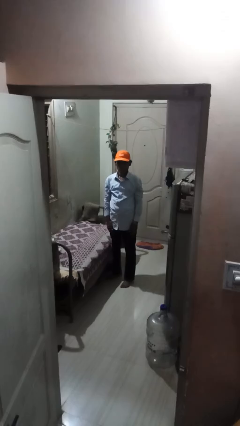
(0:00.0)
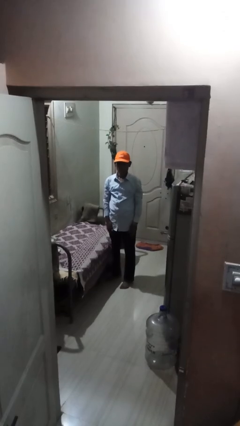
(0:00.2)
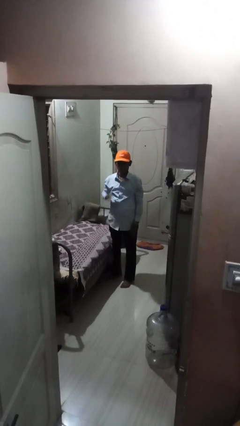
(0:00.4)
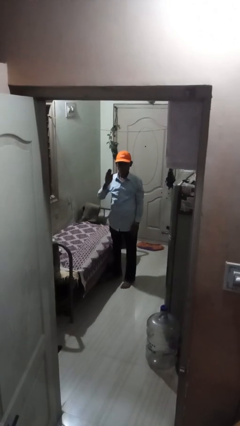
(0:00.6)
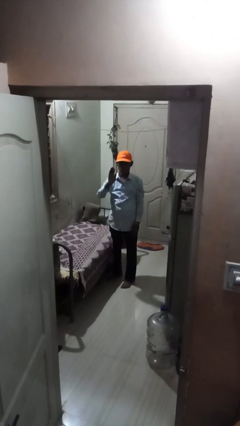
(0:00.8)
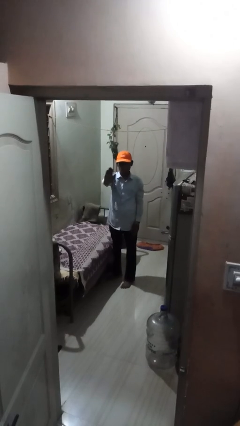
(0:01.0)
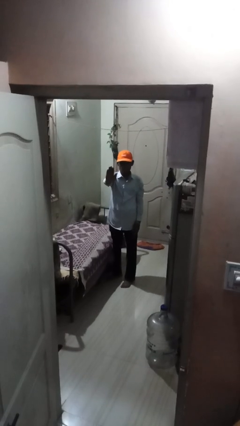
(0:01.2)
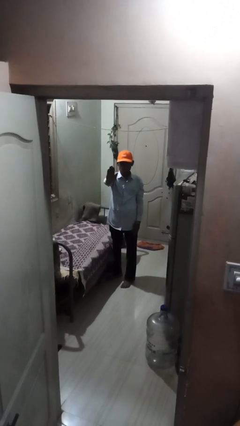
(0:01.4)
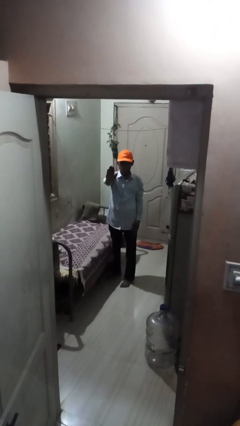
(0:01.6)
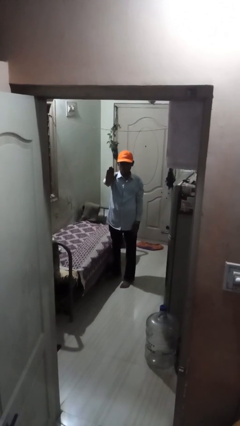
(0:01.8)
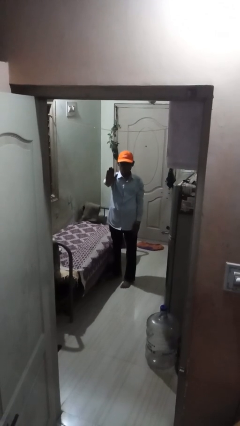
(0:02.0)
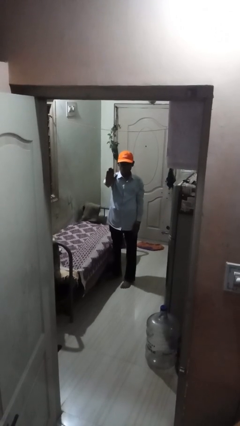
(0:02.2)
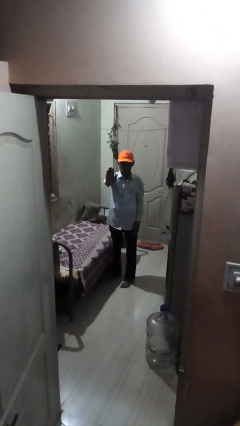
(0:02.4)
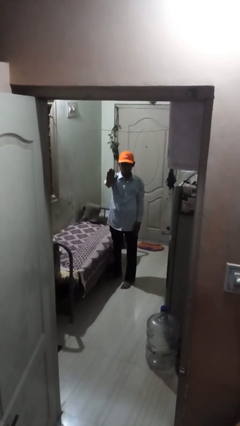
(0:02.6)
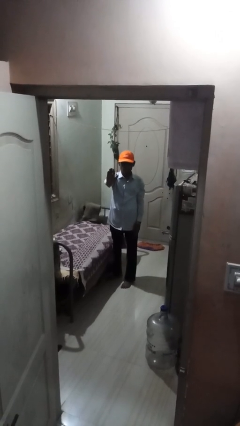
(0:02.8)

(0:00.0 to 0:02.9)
person gestures stop

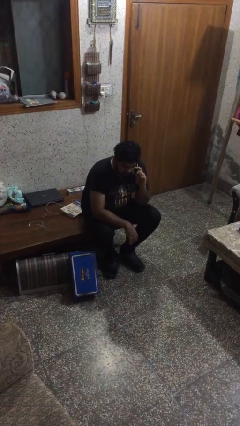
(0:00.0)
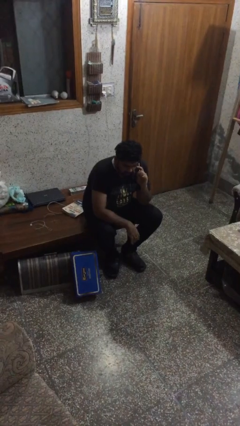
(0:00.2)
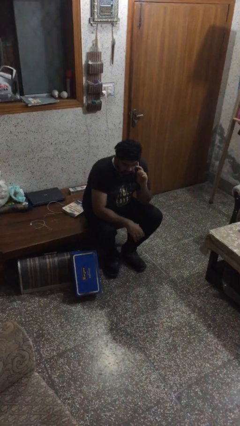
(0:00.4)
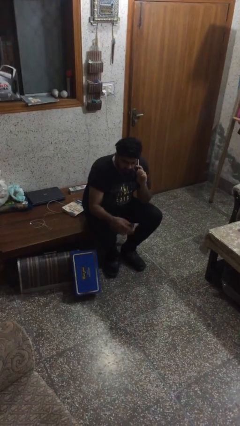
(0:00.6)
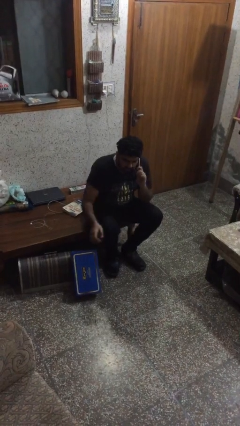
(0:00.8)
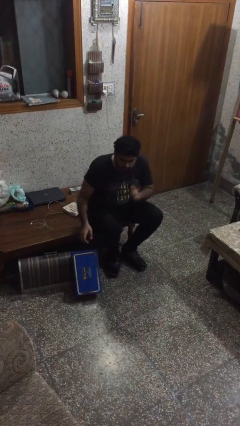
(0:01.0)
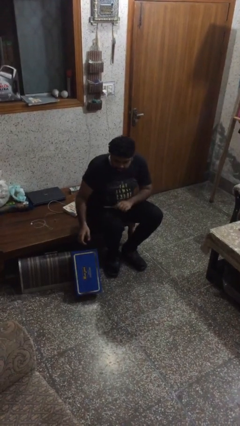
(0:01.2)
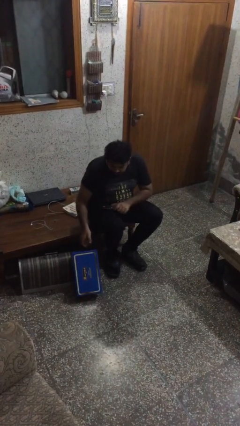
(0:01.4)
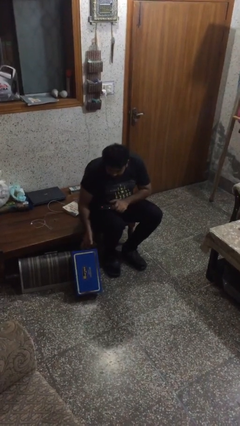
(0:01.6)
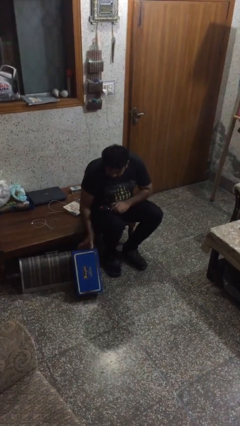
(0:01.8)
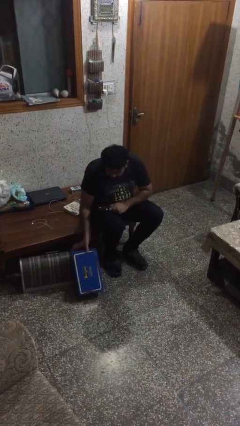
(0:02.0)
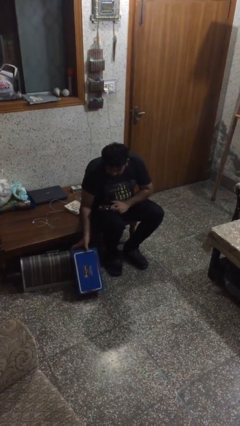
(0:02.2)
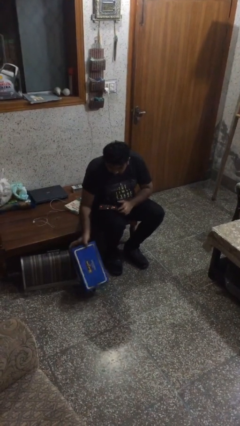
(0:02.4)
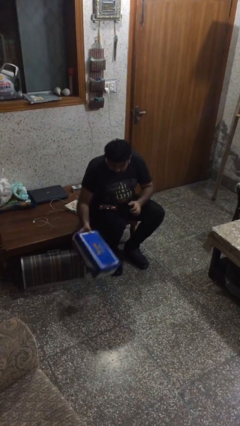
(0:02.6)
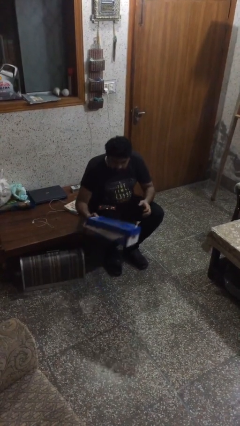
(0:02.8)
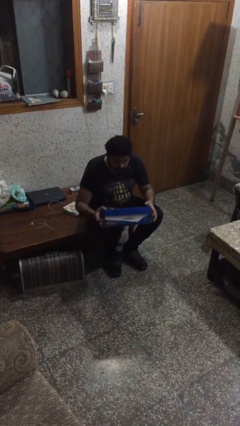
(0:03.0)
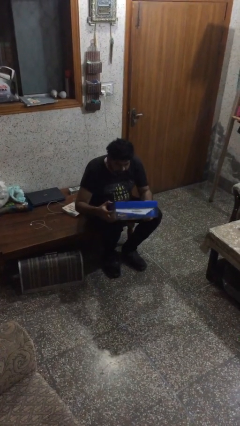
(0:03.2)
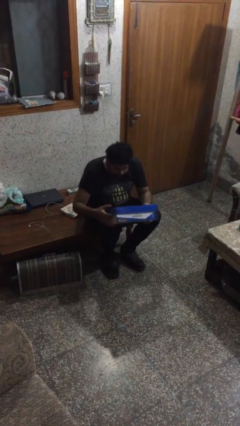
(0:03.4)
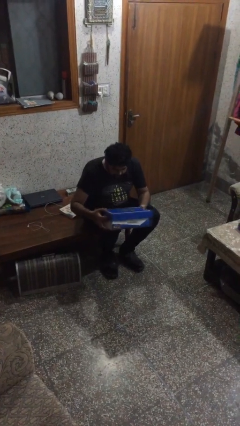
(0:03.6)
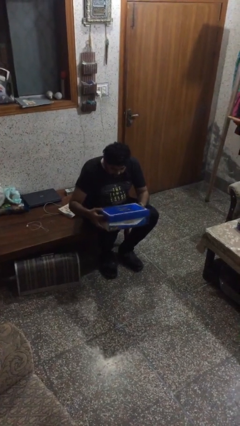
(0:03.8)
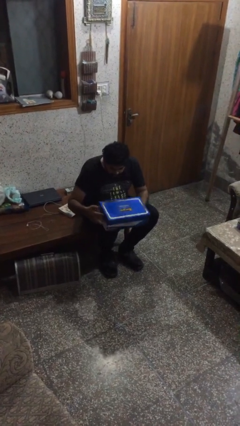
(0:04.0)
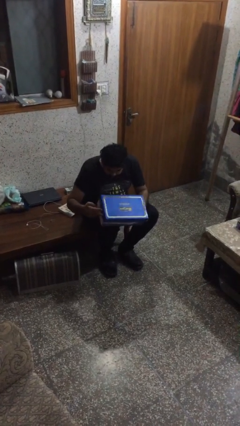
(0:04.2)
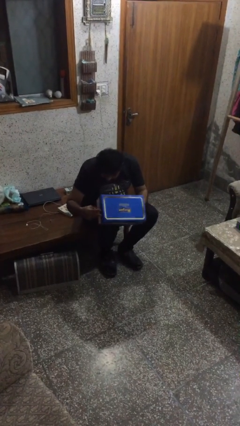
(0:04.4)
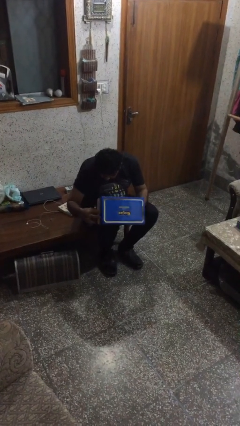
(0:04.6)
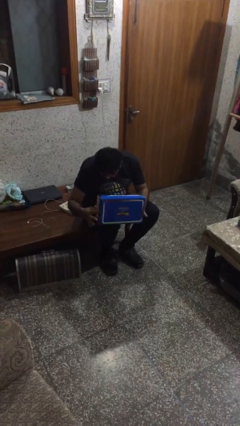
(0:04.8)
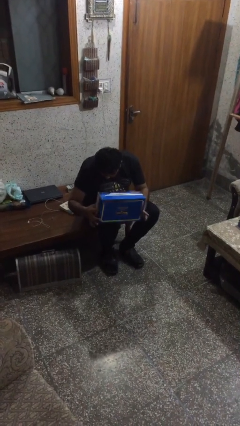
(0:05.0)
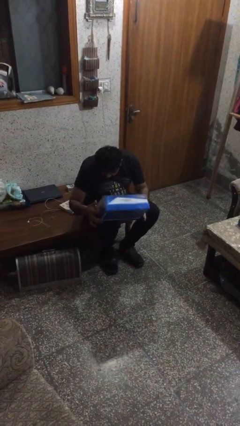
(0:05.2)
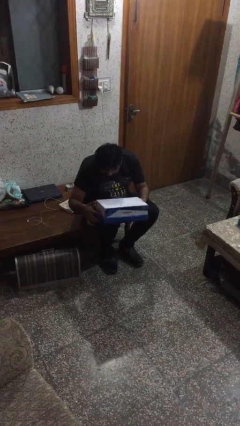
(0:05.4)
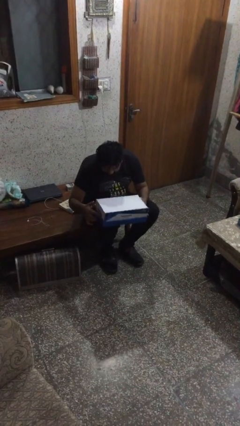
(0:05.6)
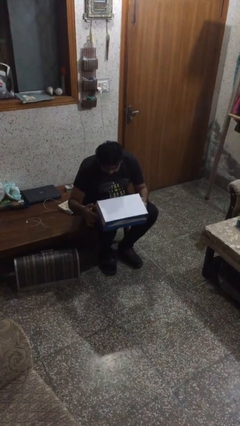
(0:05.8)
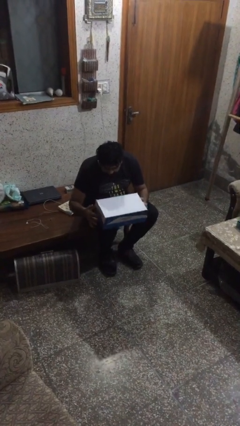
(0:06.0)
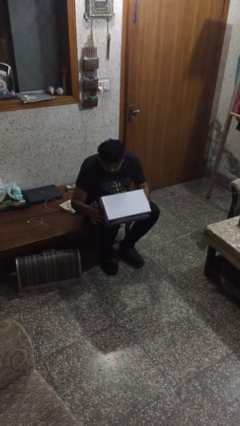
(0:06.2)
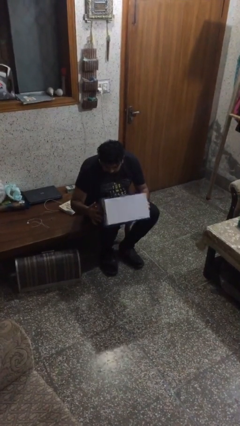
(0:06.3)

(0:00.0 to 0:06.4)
person picks up object from floor

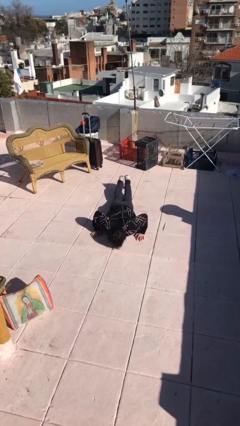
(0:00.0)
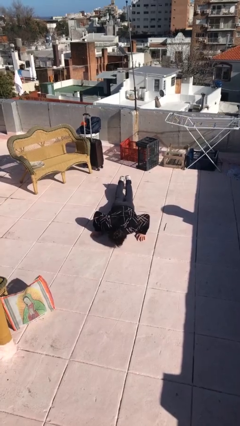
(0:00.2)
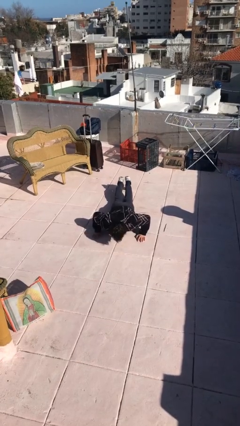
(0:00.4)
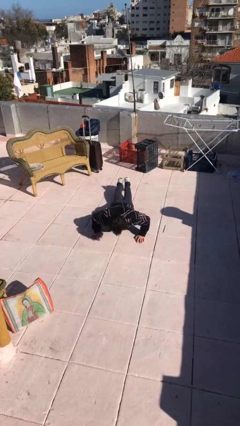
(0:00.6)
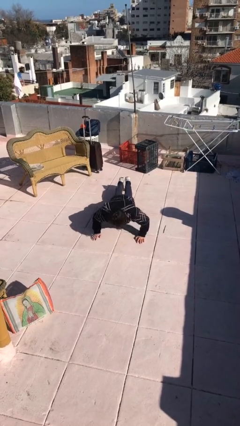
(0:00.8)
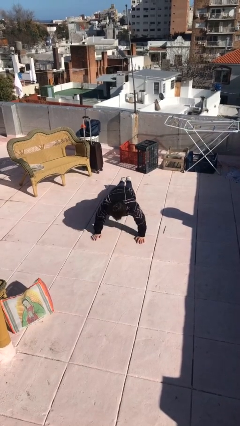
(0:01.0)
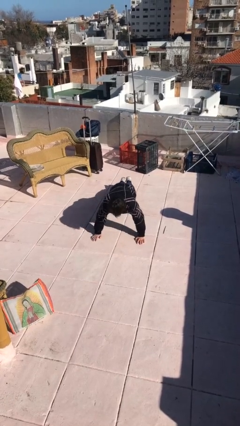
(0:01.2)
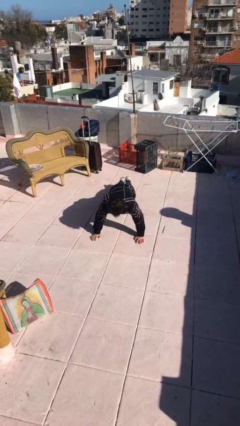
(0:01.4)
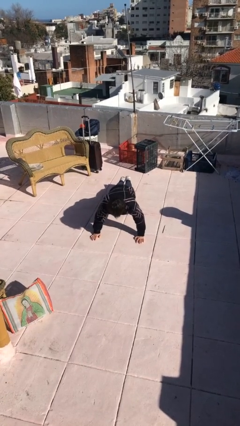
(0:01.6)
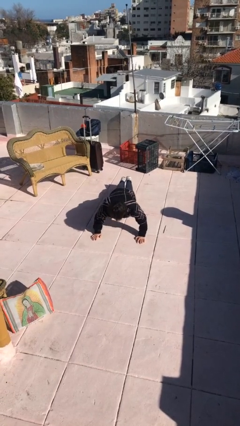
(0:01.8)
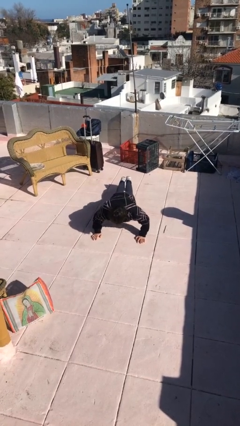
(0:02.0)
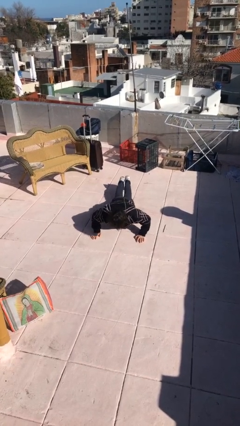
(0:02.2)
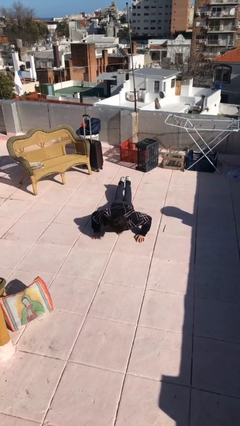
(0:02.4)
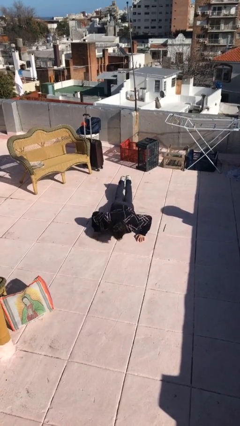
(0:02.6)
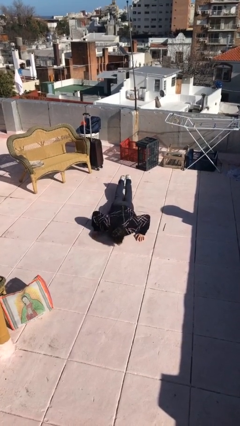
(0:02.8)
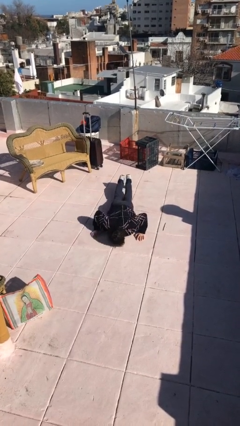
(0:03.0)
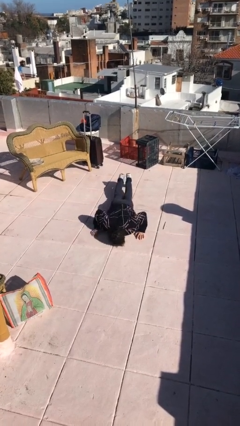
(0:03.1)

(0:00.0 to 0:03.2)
person exercises with pushup

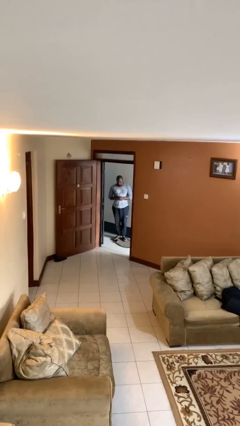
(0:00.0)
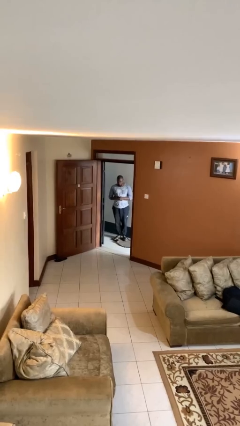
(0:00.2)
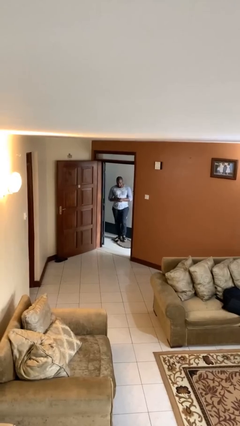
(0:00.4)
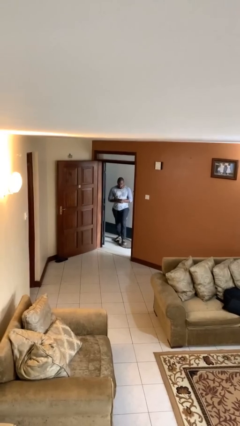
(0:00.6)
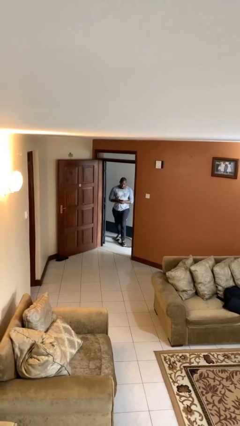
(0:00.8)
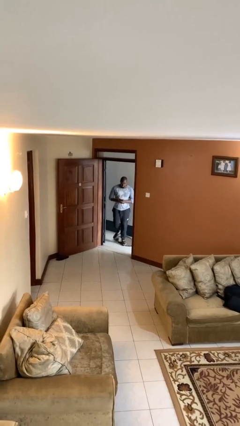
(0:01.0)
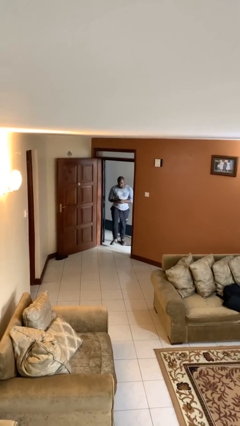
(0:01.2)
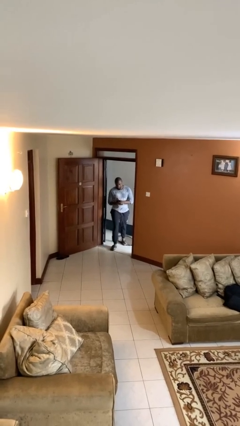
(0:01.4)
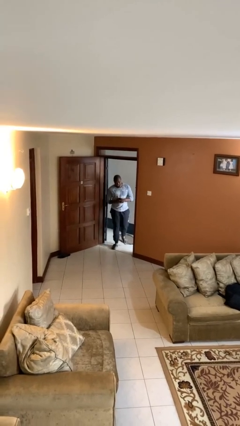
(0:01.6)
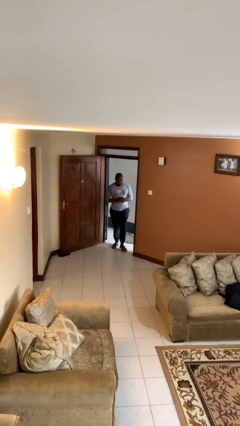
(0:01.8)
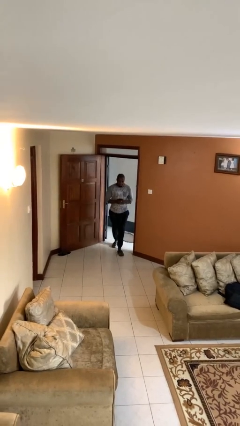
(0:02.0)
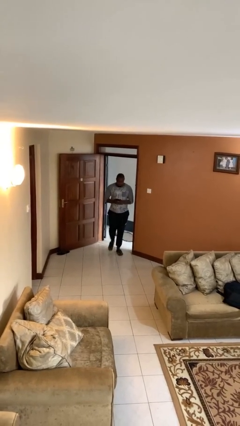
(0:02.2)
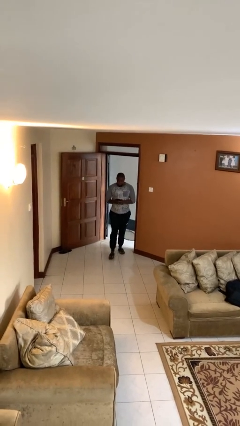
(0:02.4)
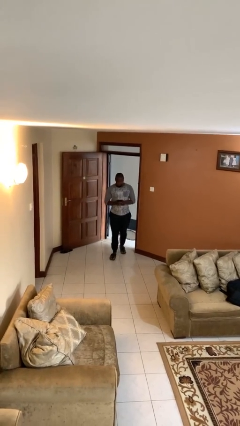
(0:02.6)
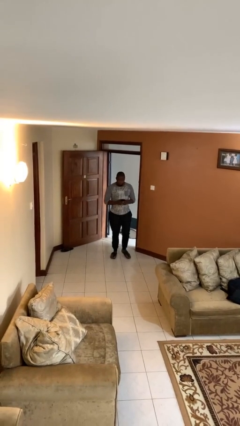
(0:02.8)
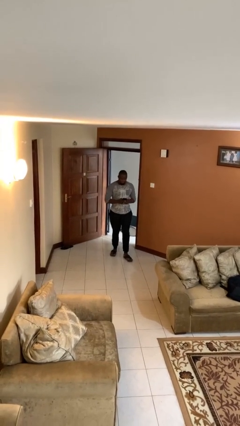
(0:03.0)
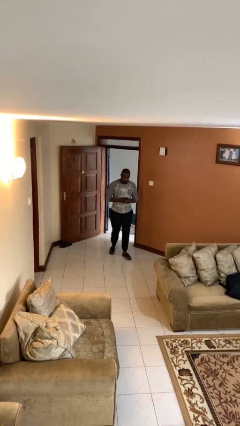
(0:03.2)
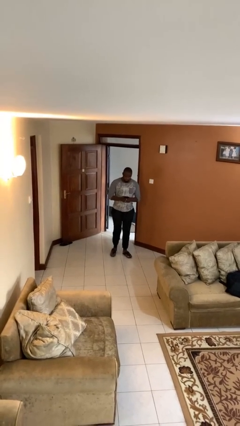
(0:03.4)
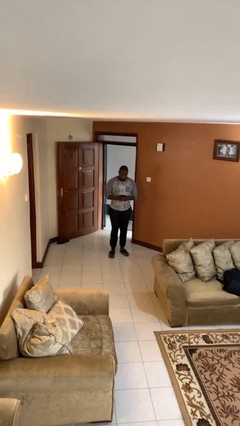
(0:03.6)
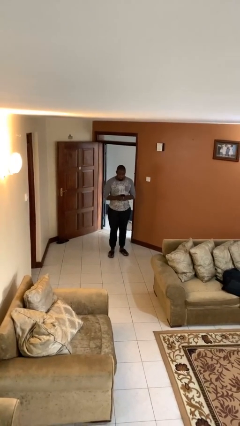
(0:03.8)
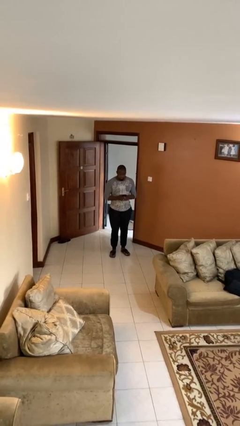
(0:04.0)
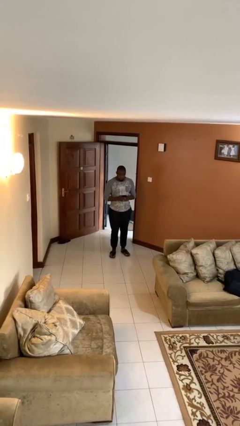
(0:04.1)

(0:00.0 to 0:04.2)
person enters scene through structure

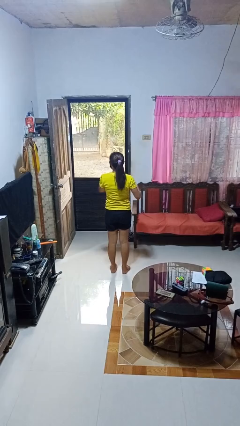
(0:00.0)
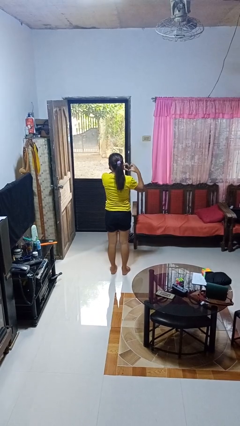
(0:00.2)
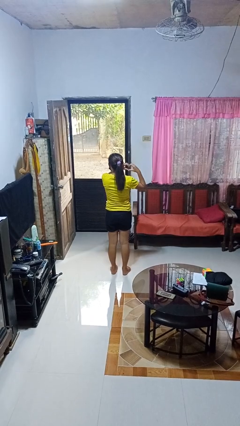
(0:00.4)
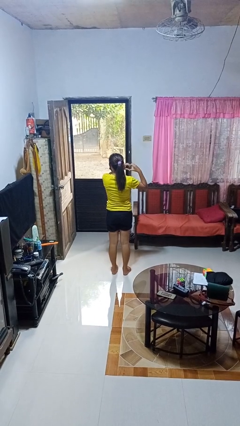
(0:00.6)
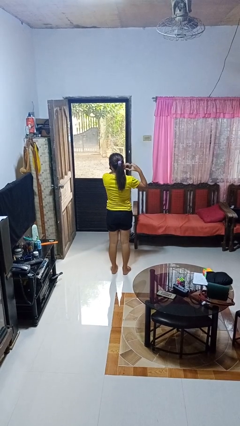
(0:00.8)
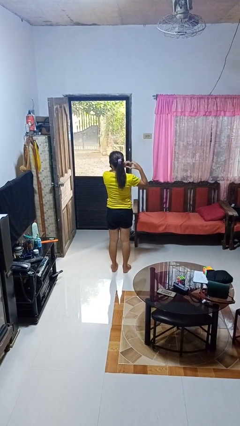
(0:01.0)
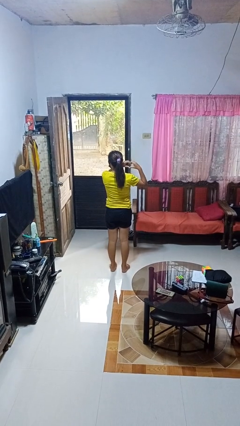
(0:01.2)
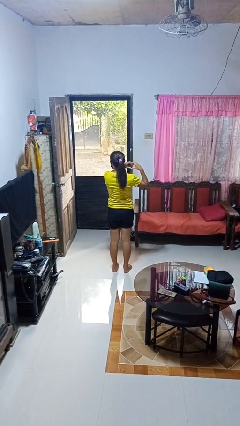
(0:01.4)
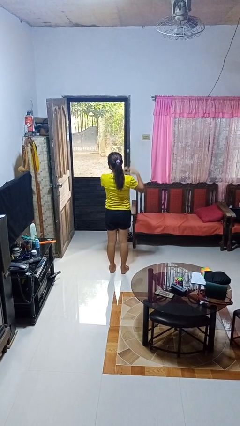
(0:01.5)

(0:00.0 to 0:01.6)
person gestures heart
